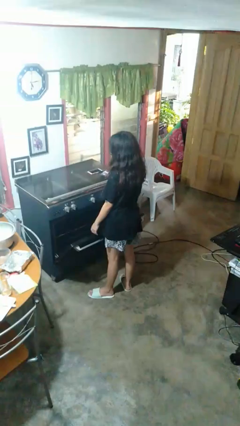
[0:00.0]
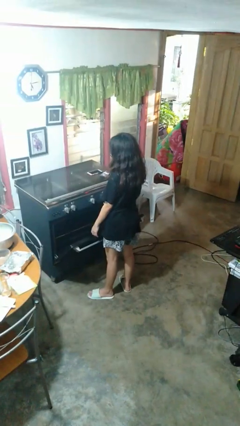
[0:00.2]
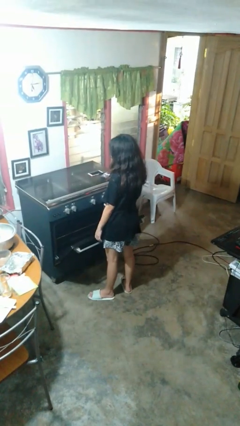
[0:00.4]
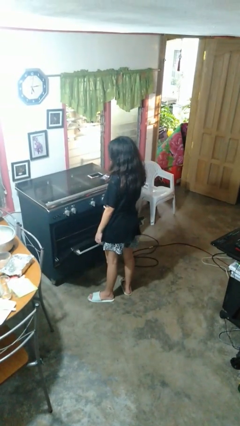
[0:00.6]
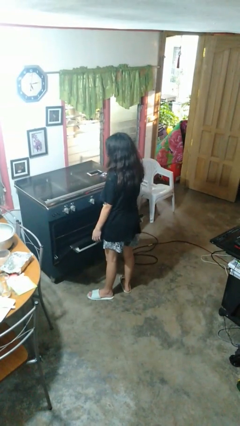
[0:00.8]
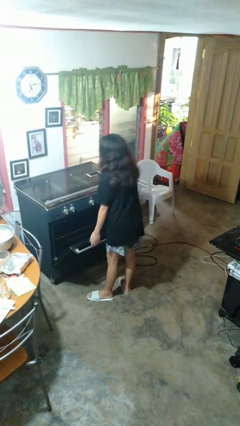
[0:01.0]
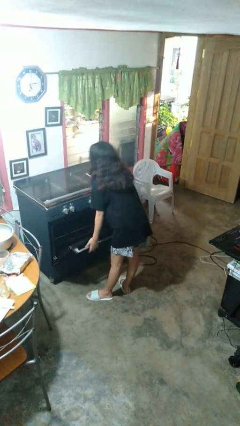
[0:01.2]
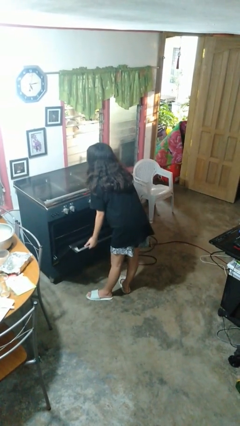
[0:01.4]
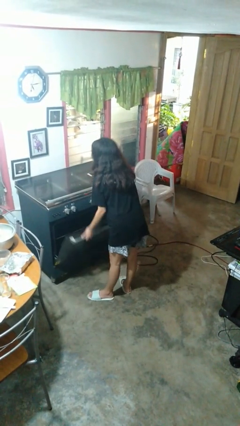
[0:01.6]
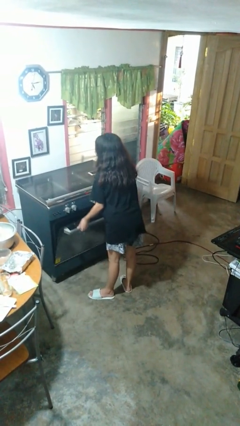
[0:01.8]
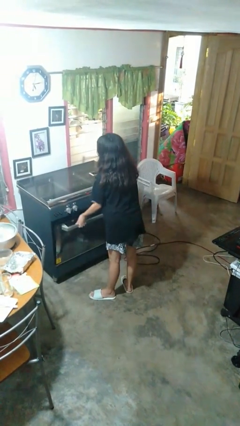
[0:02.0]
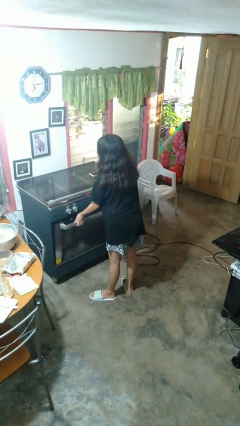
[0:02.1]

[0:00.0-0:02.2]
person closes oven door

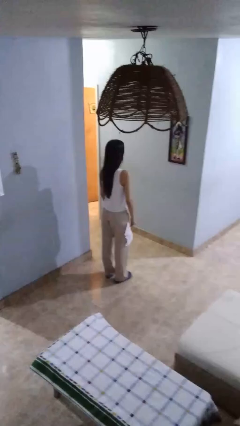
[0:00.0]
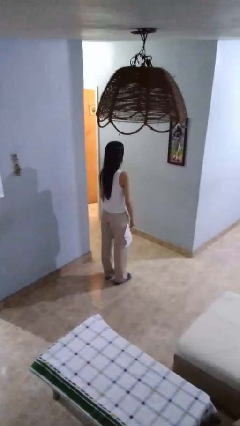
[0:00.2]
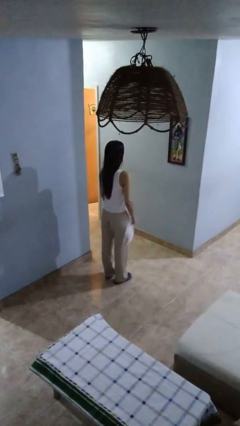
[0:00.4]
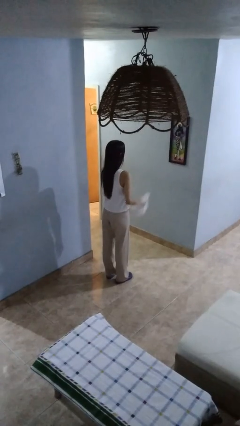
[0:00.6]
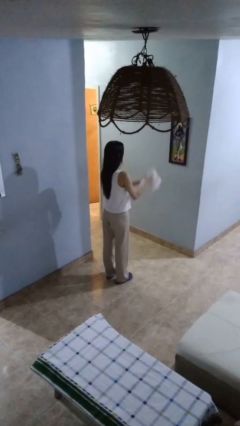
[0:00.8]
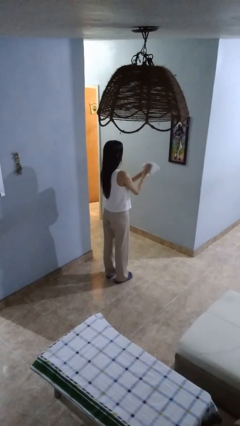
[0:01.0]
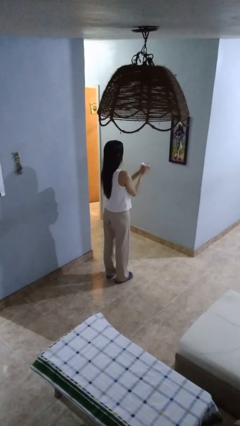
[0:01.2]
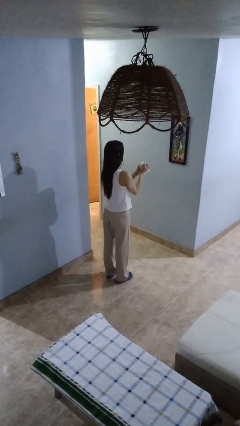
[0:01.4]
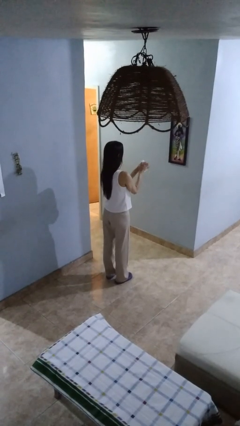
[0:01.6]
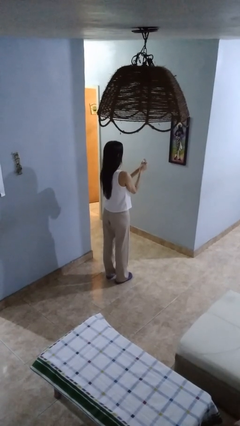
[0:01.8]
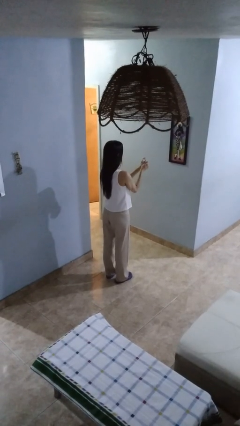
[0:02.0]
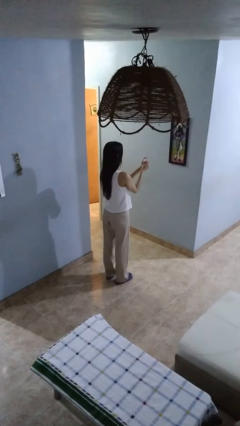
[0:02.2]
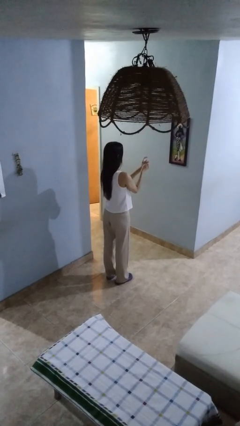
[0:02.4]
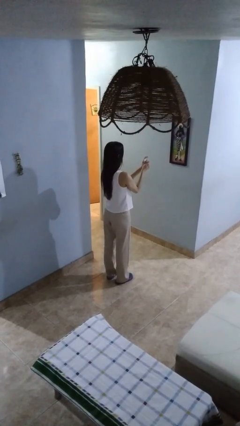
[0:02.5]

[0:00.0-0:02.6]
person crumples paper

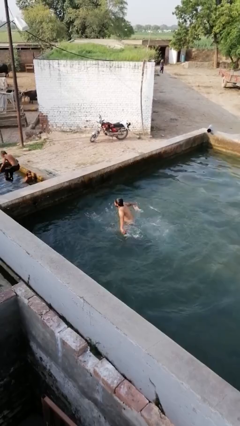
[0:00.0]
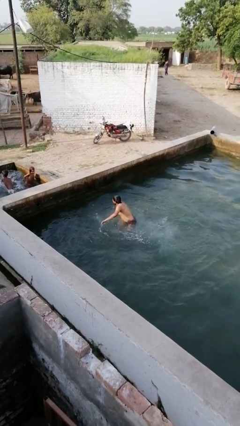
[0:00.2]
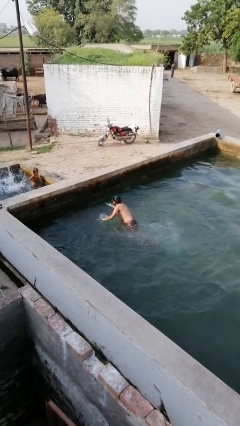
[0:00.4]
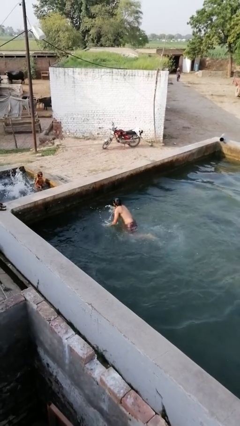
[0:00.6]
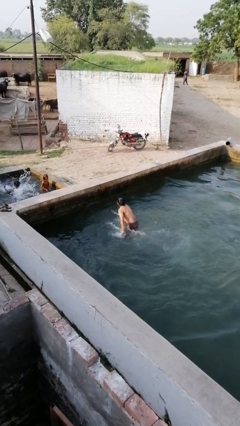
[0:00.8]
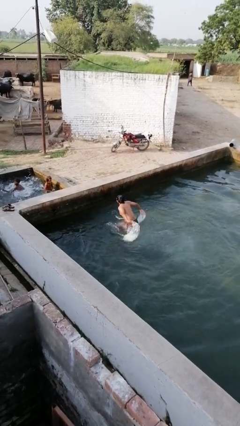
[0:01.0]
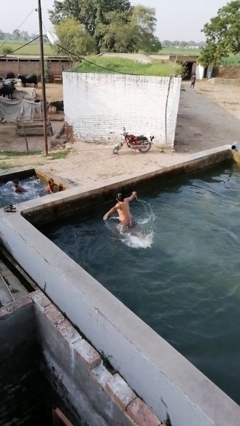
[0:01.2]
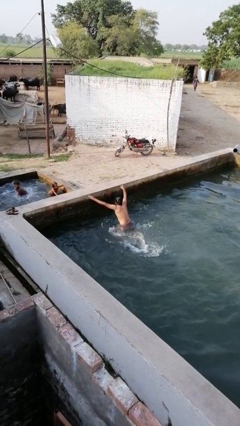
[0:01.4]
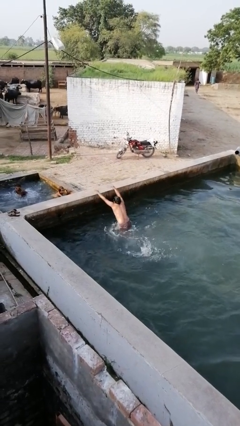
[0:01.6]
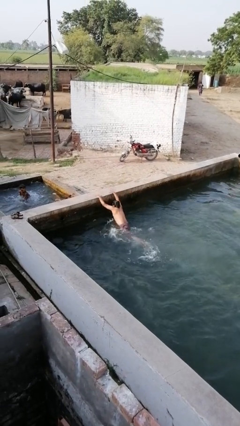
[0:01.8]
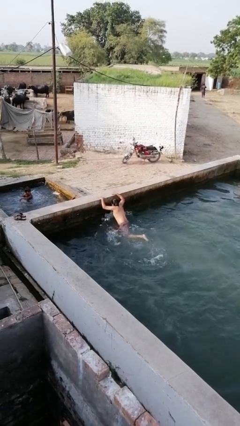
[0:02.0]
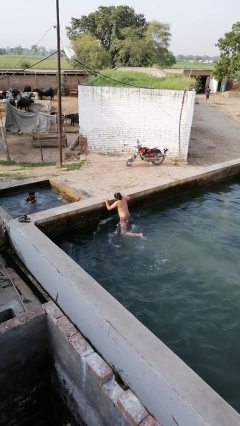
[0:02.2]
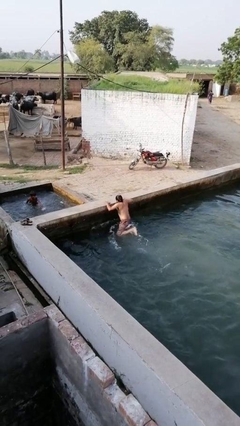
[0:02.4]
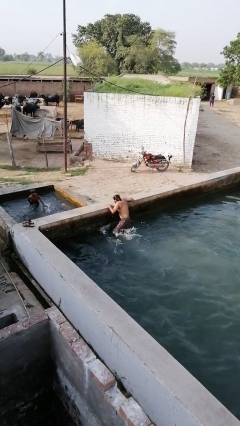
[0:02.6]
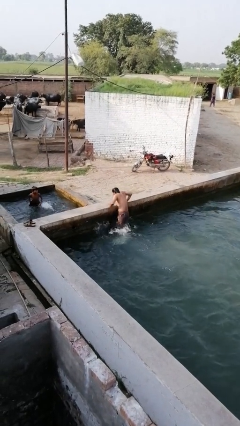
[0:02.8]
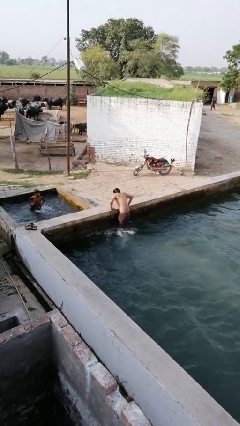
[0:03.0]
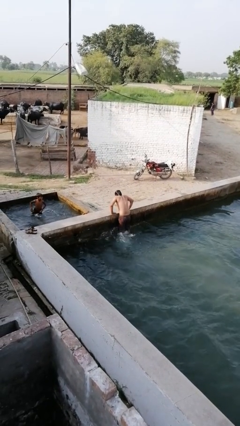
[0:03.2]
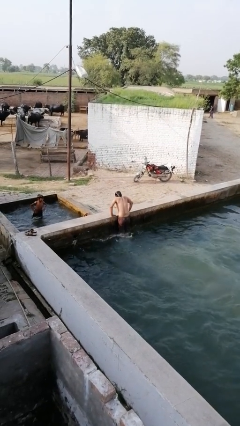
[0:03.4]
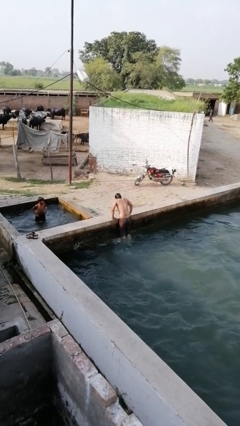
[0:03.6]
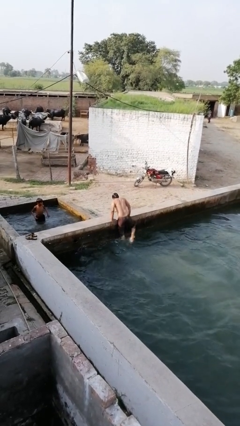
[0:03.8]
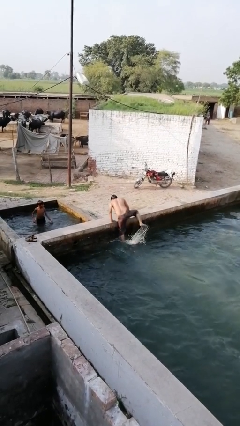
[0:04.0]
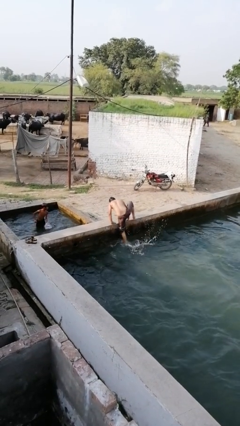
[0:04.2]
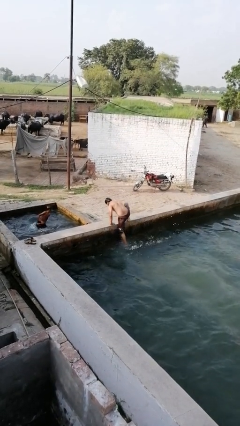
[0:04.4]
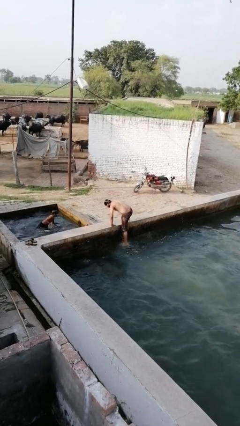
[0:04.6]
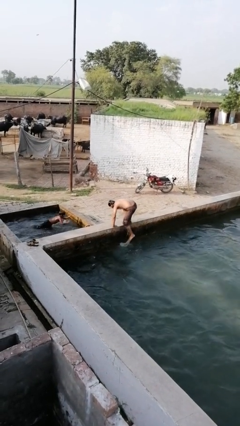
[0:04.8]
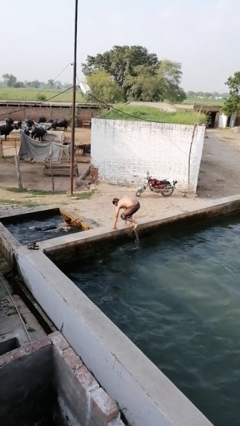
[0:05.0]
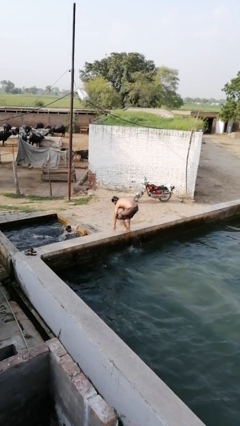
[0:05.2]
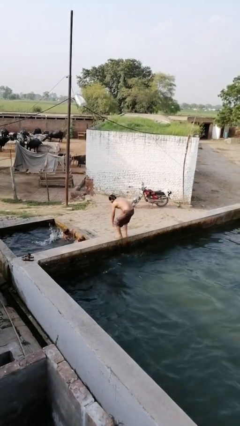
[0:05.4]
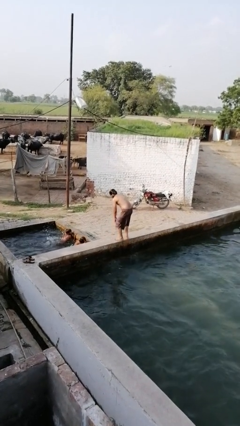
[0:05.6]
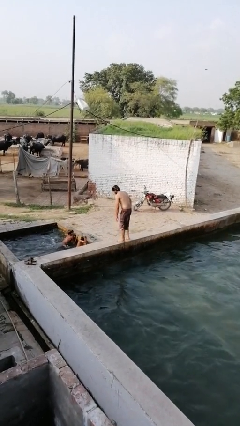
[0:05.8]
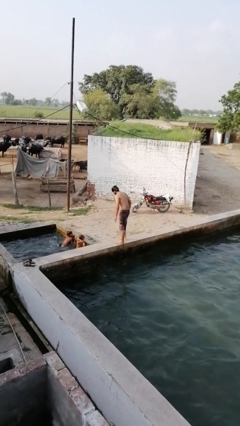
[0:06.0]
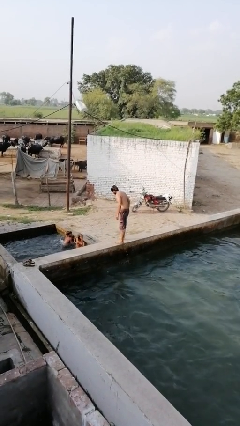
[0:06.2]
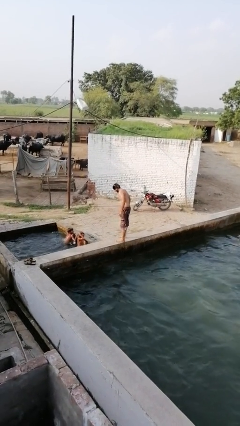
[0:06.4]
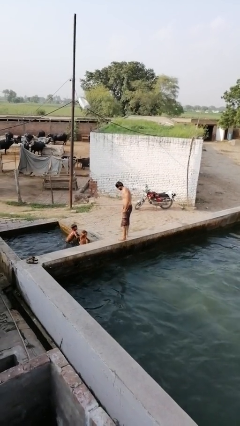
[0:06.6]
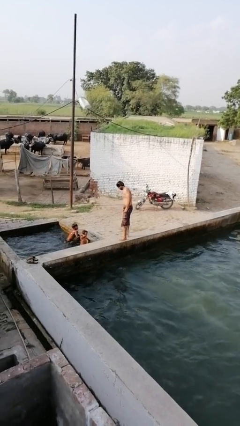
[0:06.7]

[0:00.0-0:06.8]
person exits pool

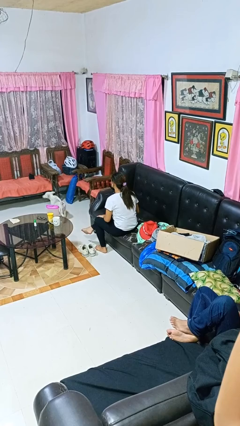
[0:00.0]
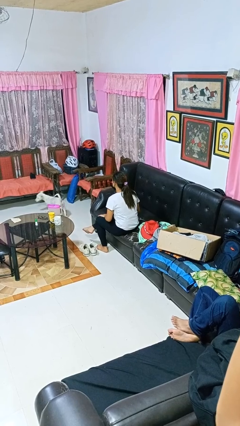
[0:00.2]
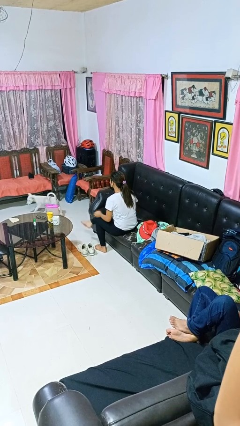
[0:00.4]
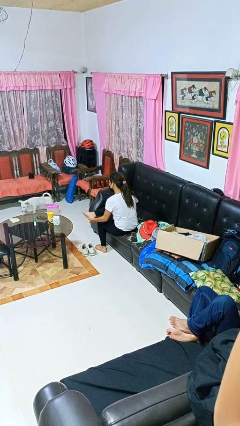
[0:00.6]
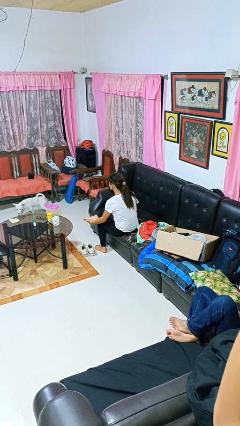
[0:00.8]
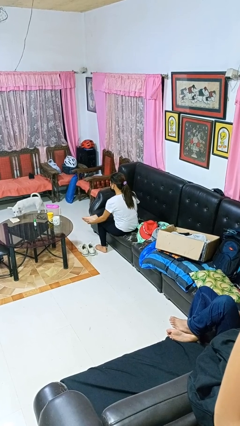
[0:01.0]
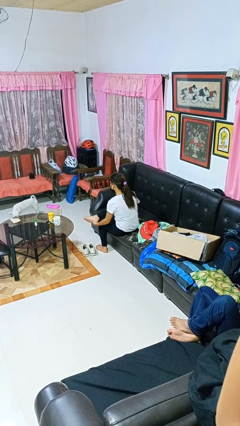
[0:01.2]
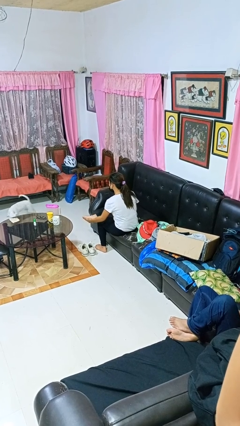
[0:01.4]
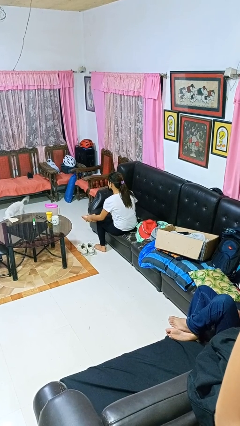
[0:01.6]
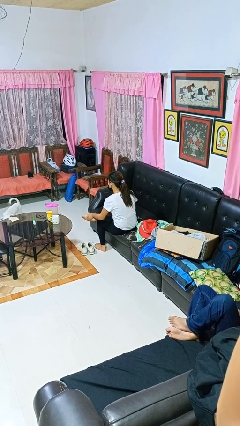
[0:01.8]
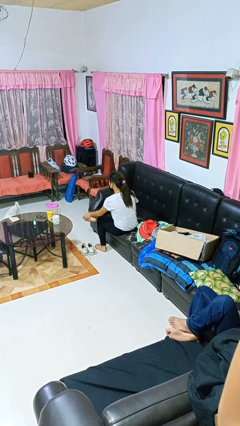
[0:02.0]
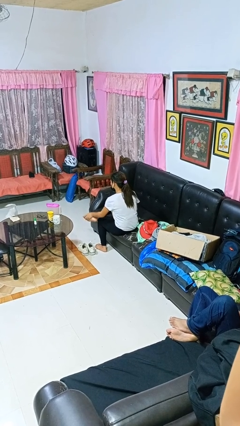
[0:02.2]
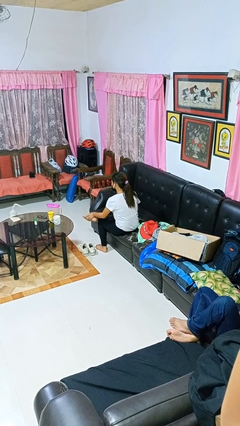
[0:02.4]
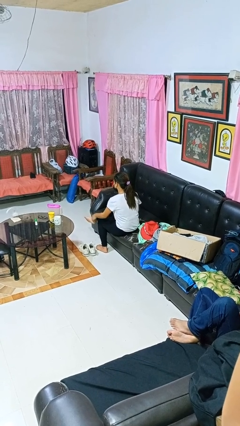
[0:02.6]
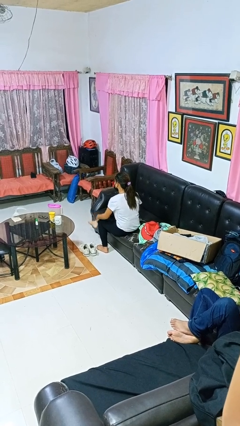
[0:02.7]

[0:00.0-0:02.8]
person rubs foot

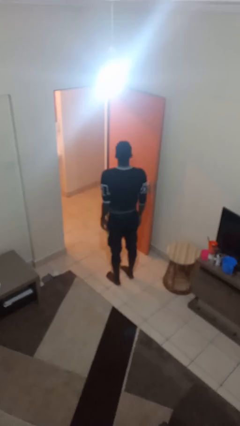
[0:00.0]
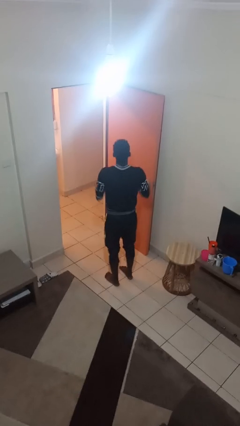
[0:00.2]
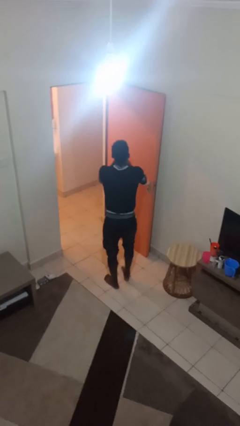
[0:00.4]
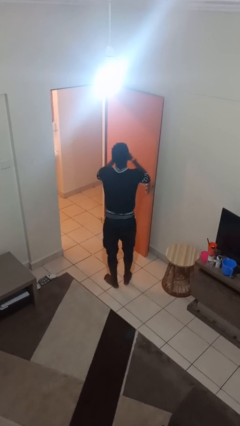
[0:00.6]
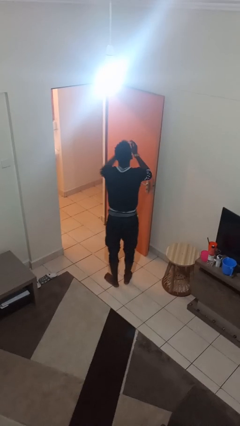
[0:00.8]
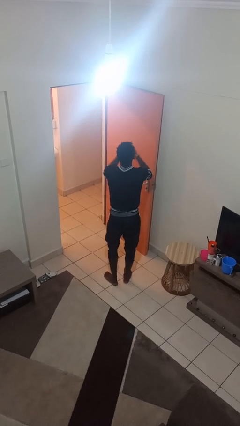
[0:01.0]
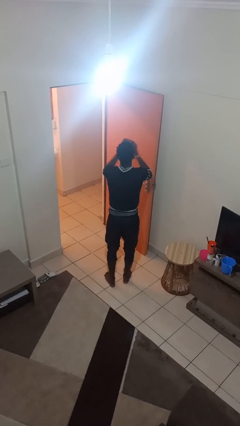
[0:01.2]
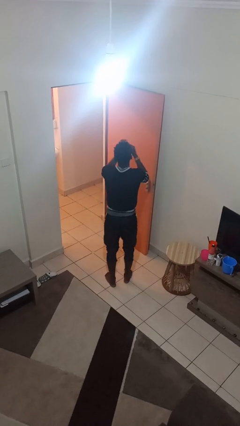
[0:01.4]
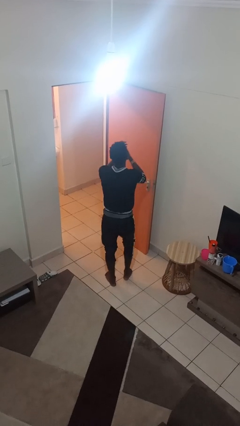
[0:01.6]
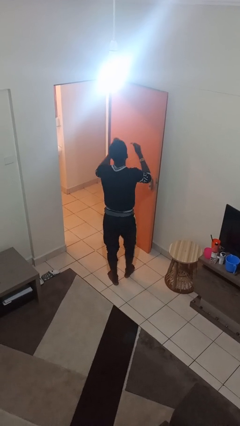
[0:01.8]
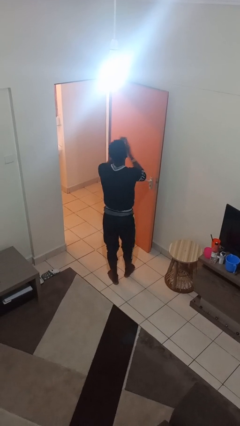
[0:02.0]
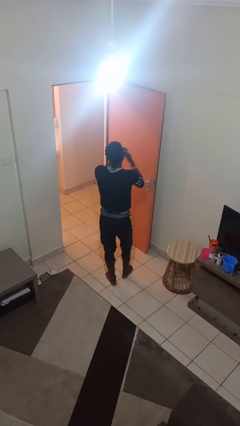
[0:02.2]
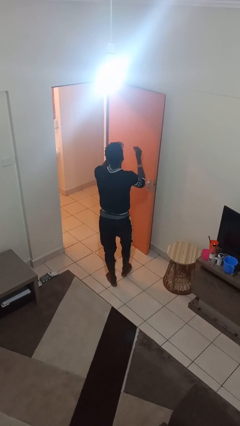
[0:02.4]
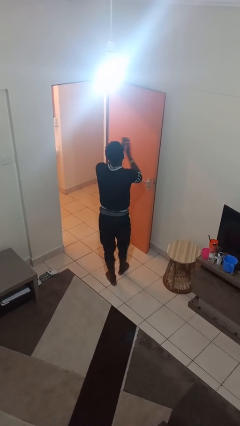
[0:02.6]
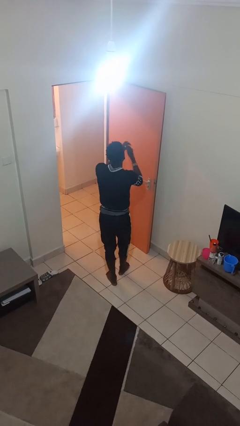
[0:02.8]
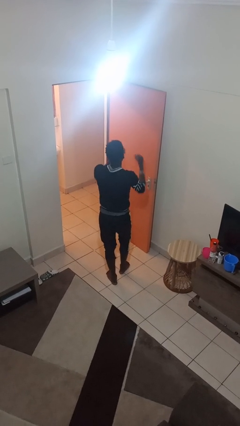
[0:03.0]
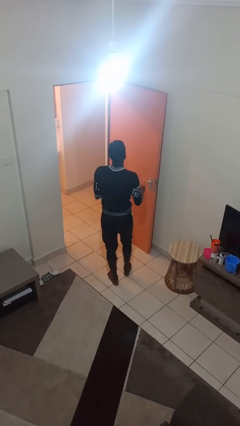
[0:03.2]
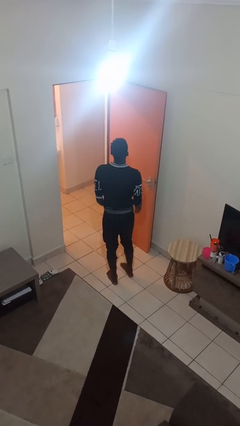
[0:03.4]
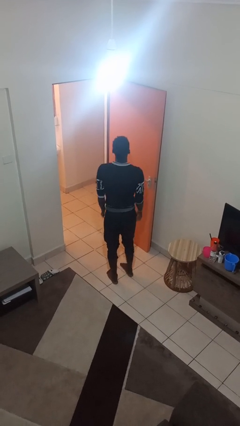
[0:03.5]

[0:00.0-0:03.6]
person claps hands
